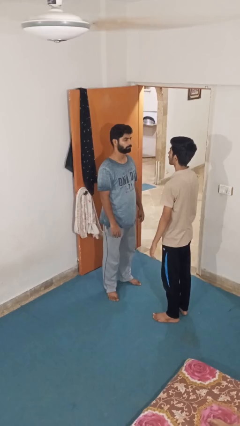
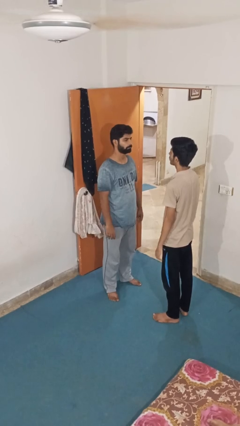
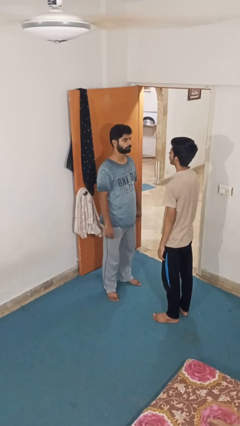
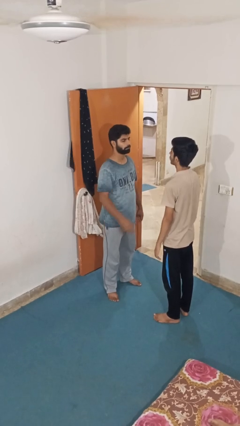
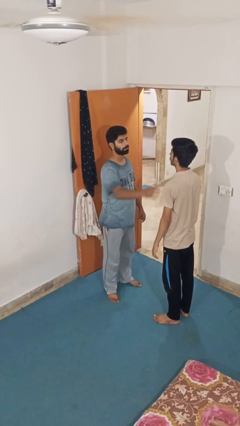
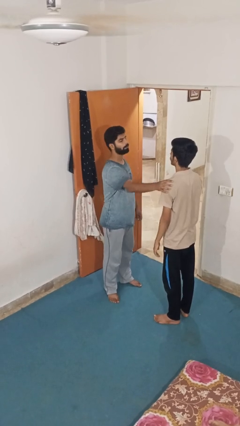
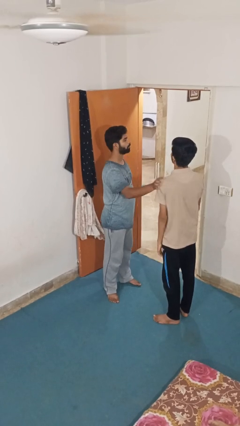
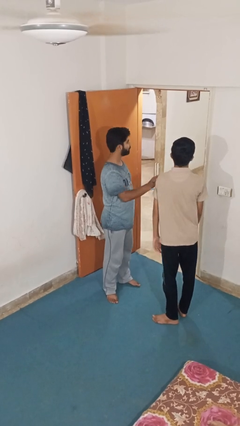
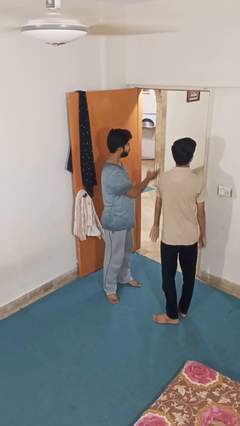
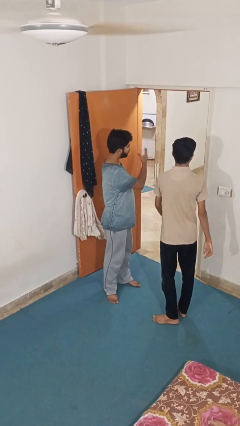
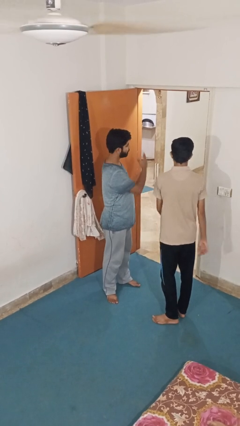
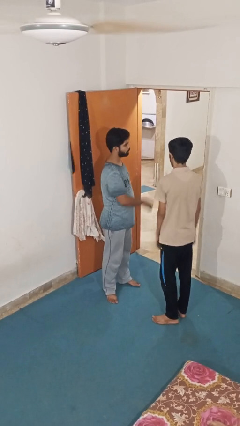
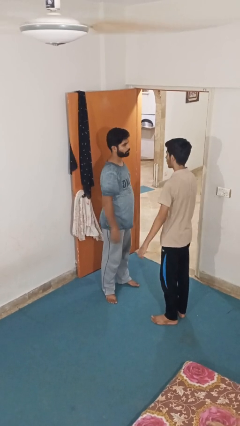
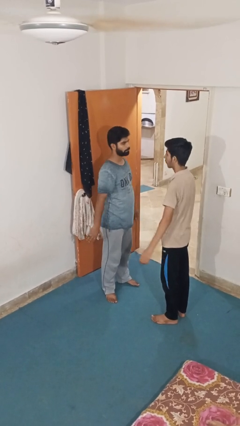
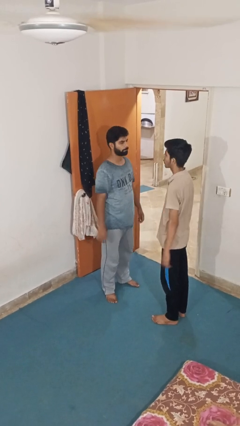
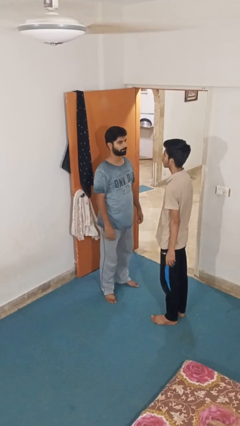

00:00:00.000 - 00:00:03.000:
person shoves person

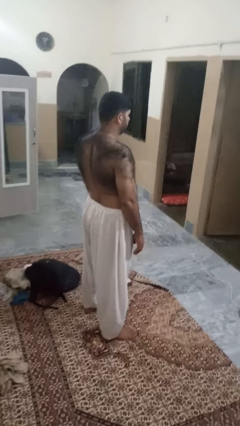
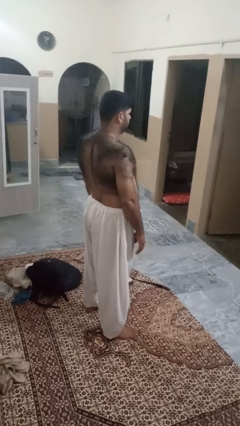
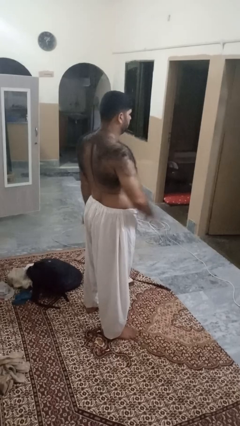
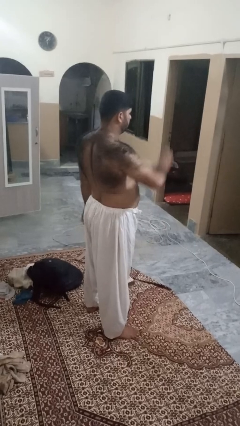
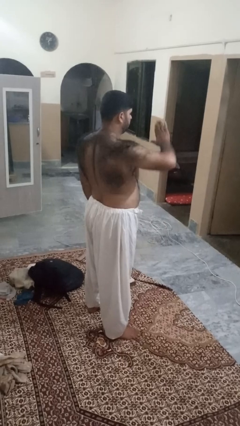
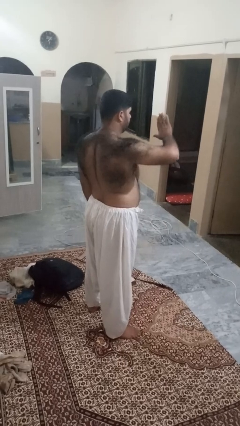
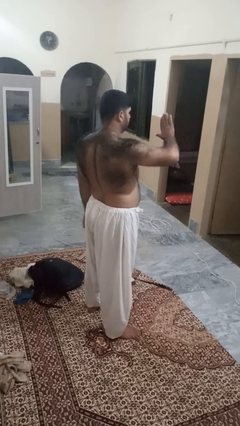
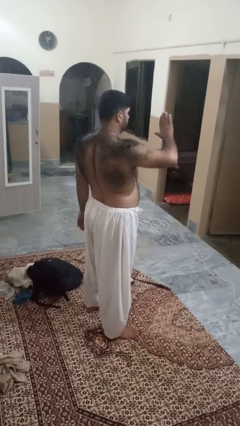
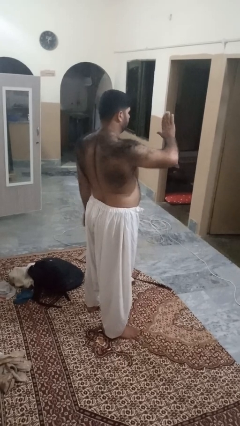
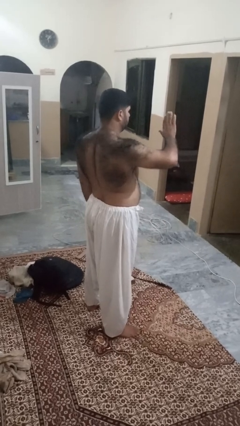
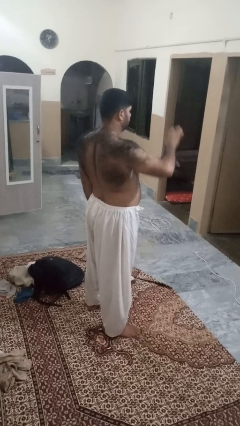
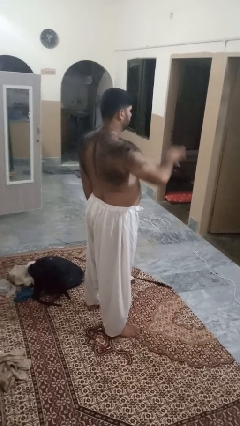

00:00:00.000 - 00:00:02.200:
person gestures stop

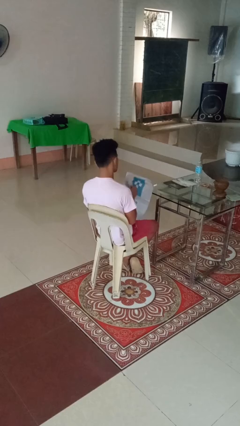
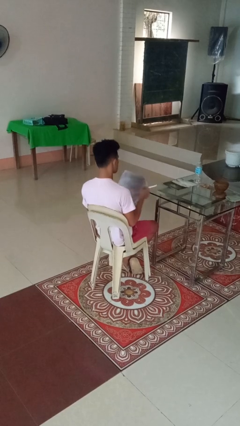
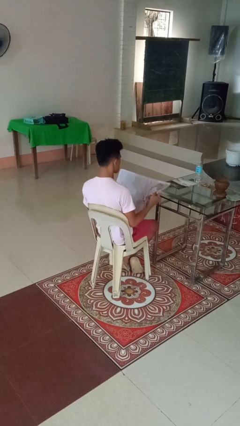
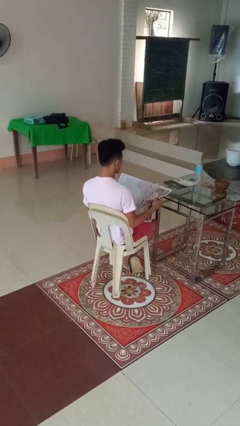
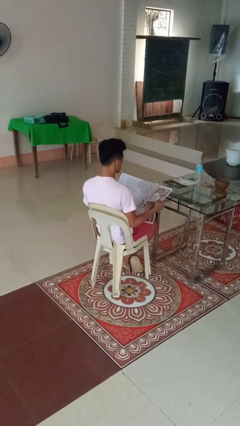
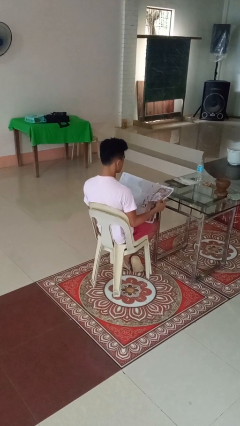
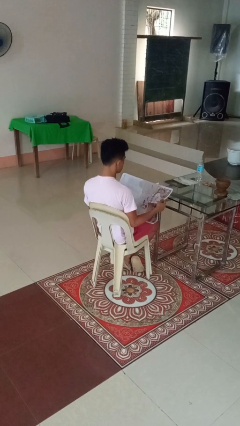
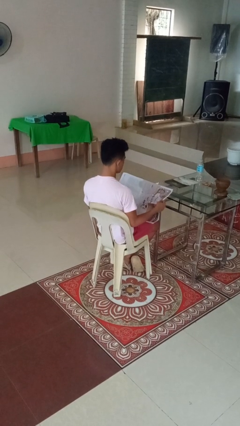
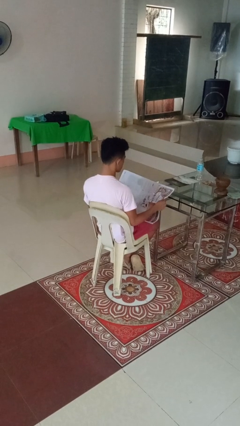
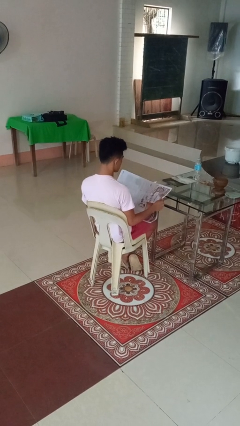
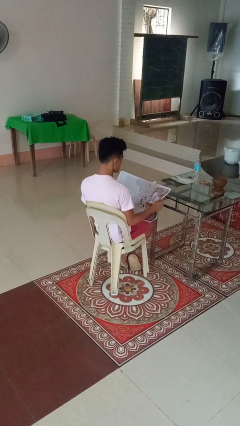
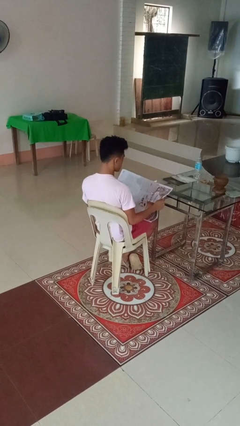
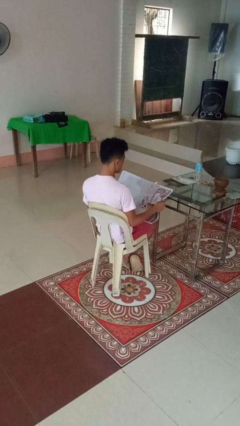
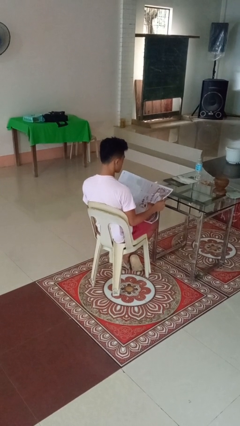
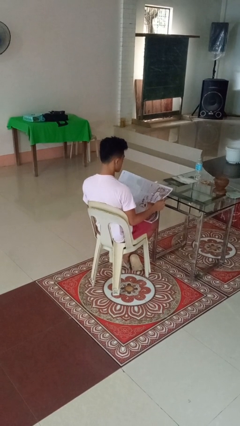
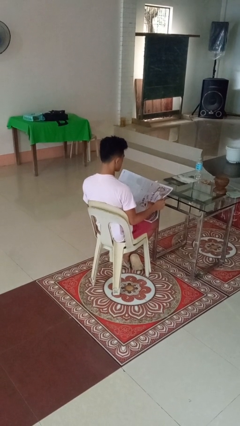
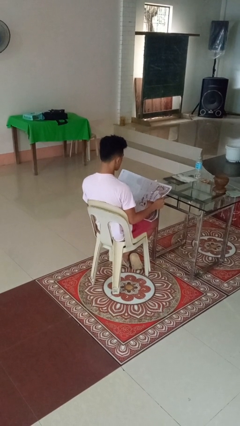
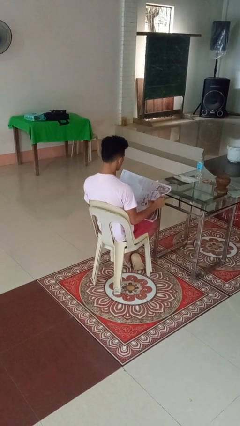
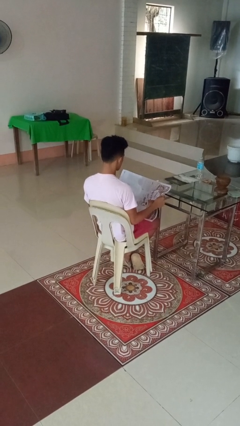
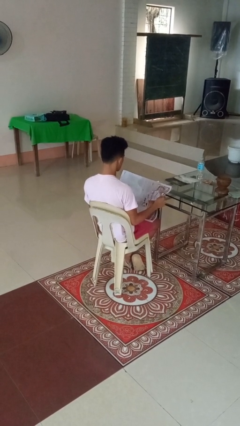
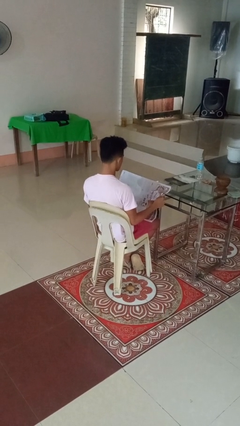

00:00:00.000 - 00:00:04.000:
person reads newspaper

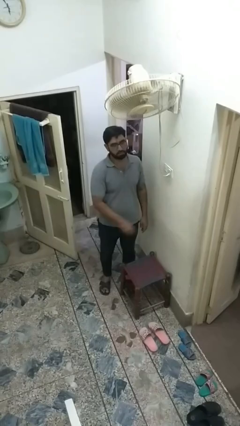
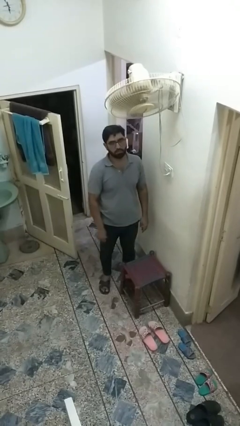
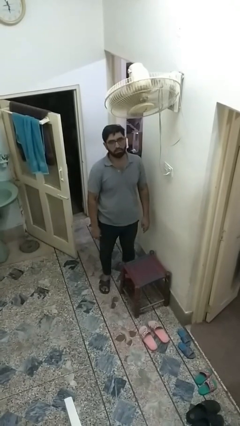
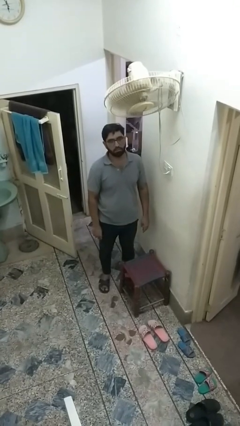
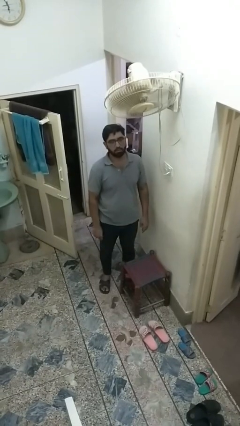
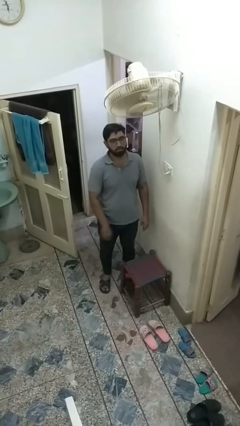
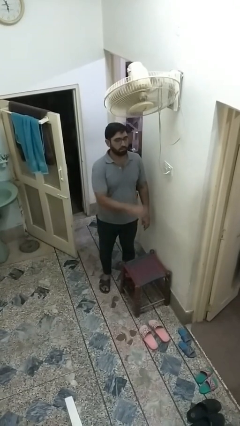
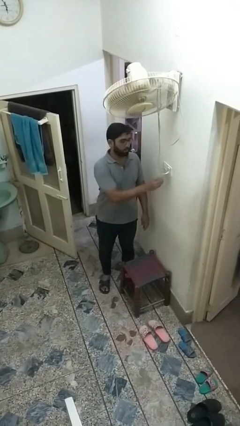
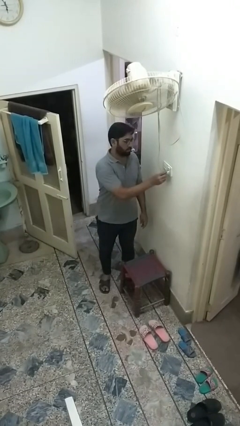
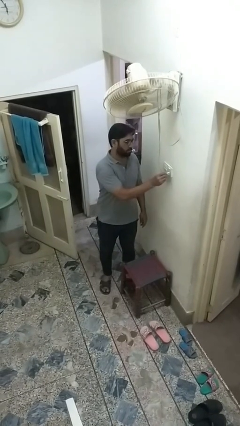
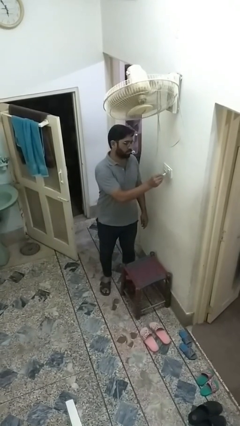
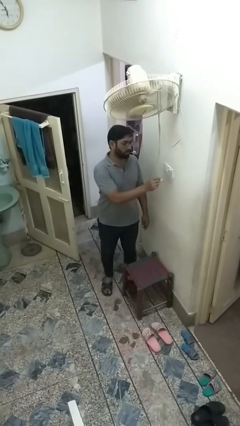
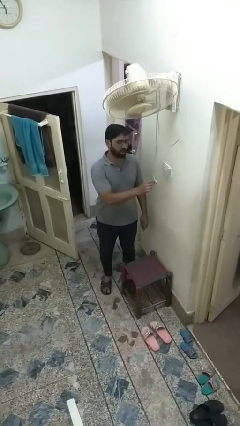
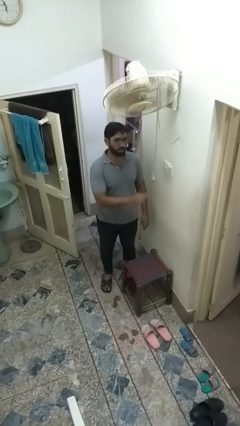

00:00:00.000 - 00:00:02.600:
person unplugs from electrical socket

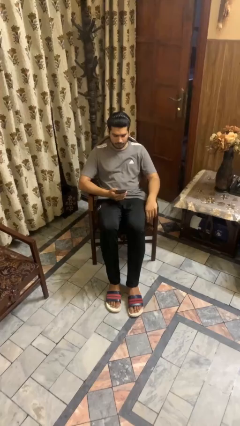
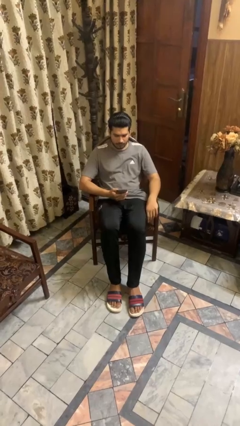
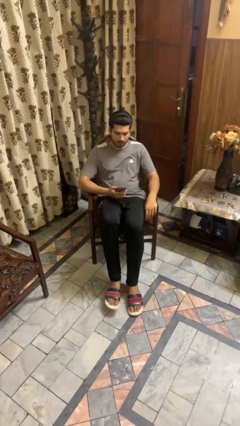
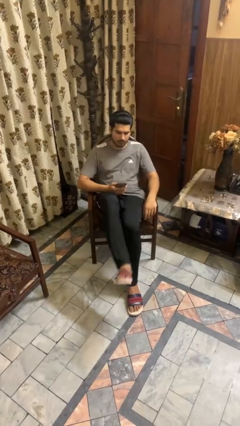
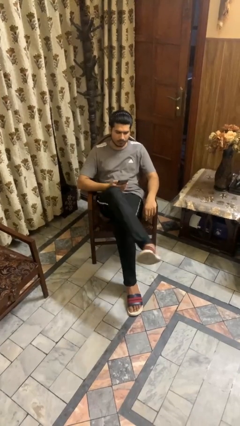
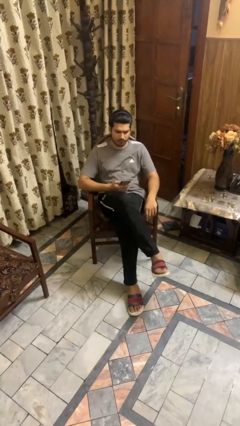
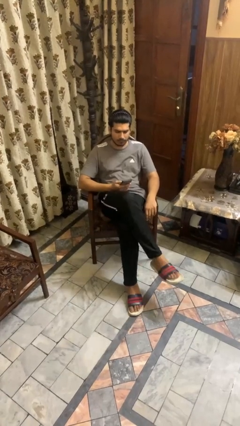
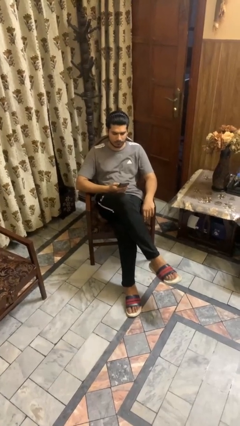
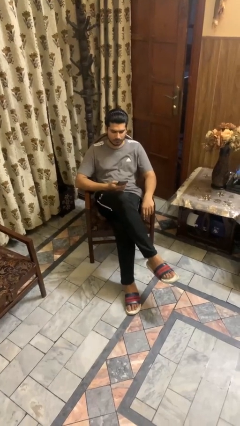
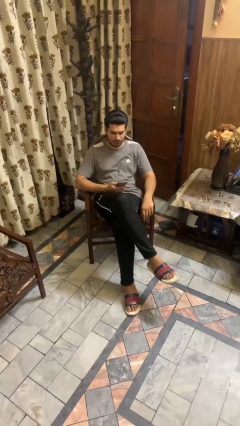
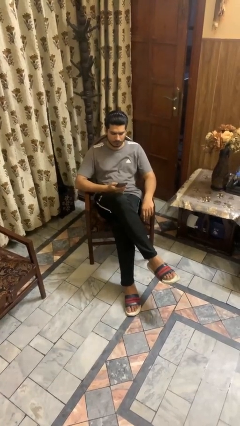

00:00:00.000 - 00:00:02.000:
person crosses legs

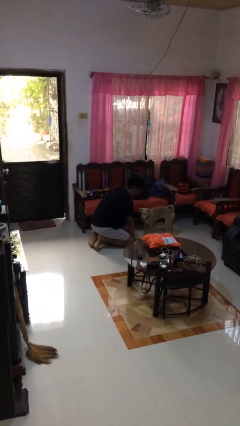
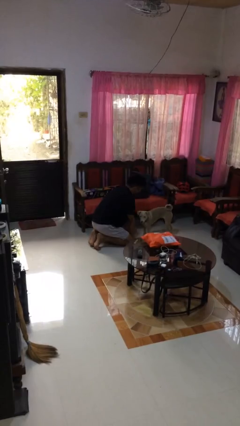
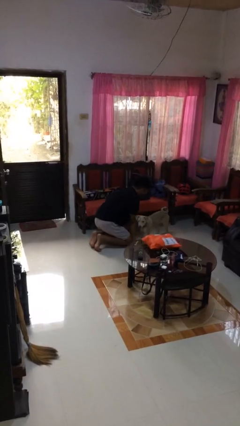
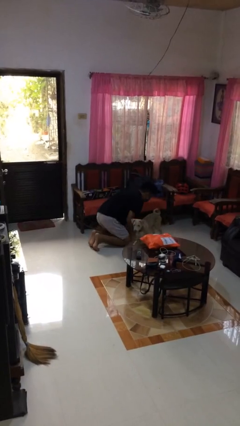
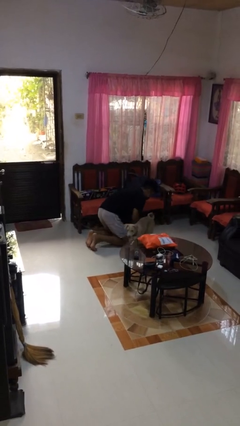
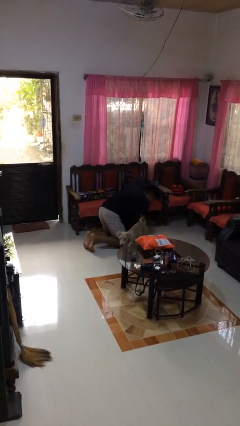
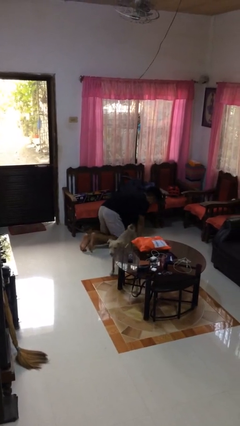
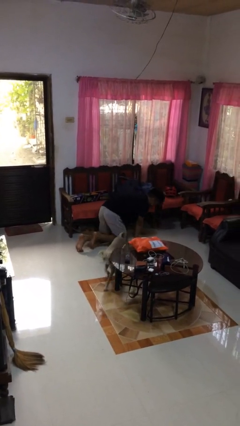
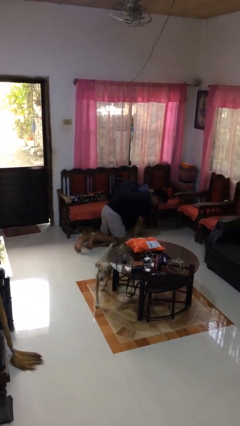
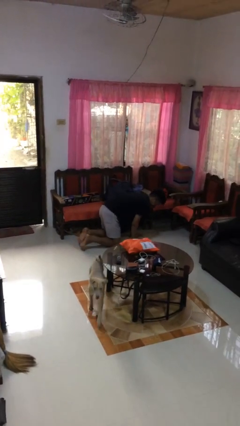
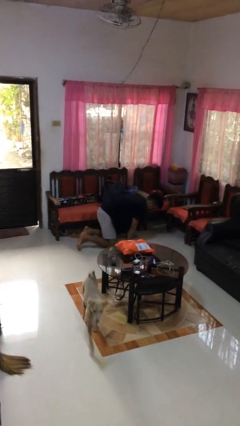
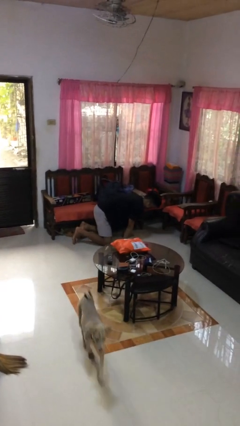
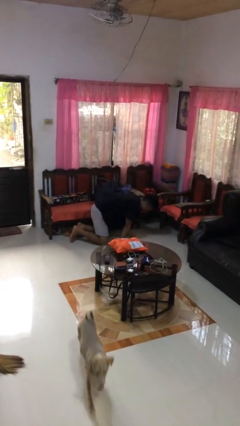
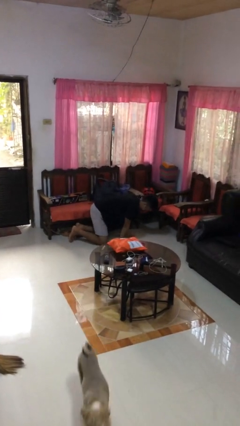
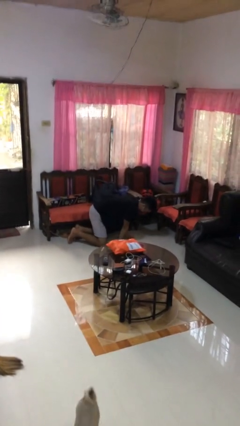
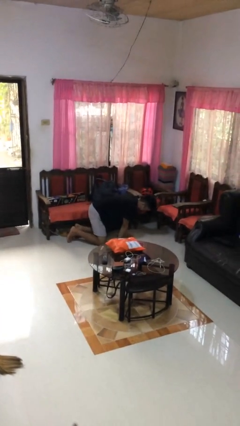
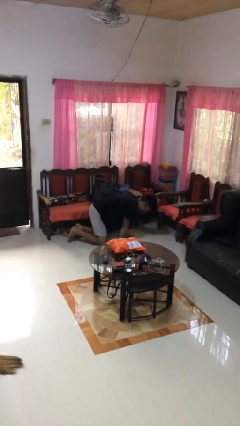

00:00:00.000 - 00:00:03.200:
person crawls

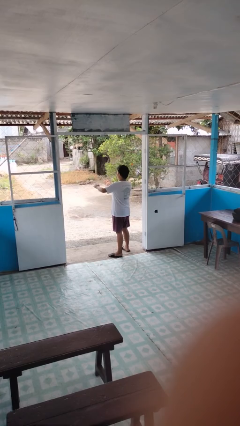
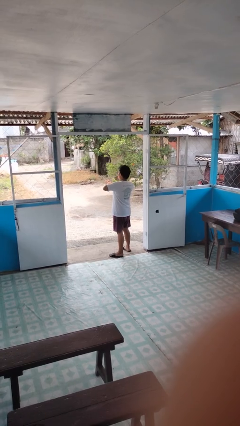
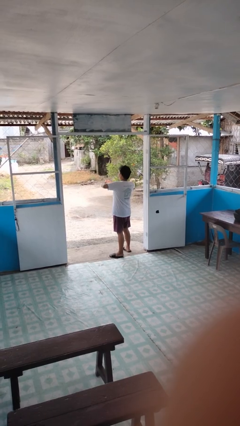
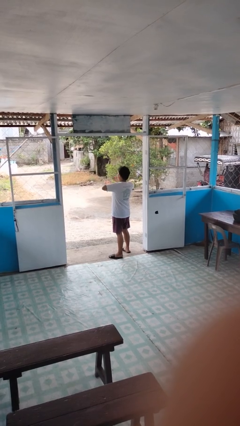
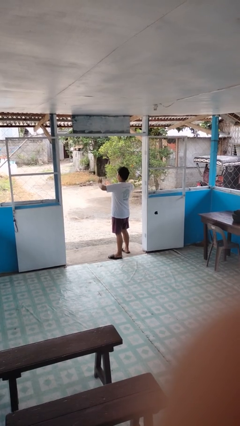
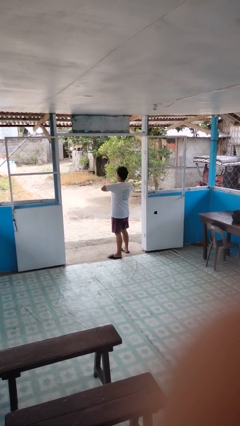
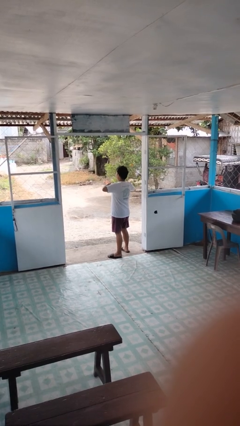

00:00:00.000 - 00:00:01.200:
person drums on chest
